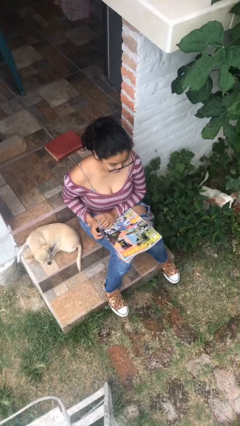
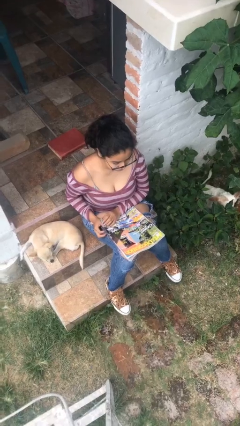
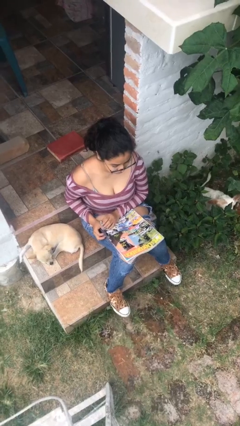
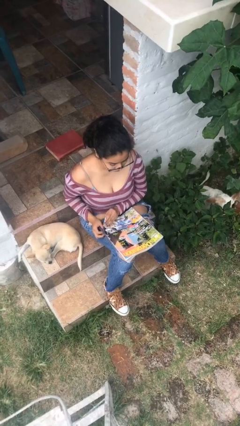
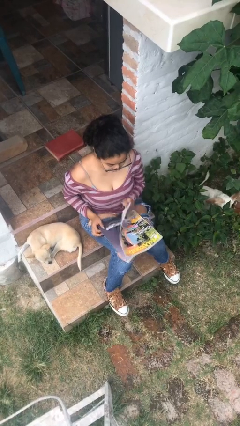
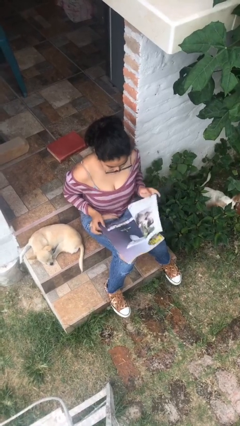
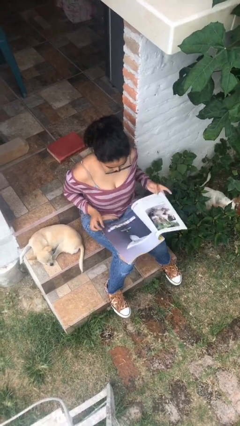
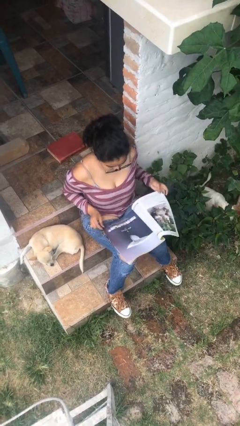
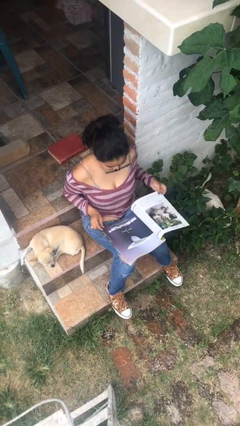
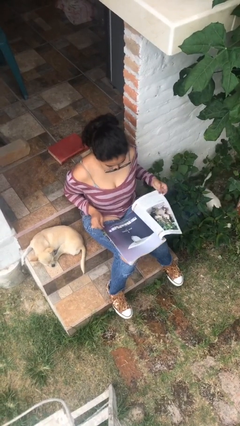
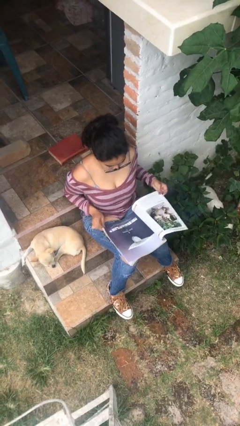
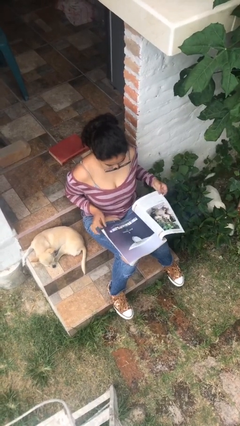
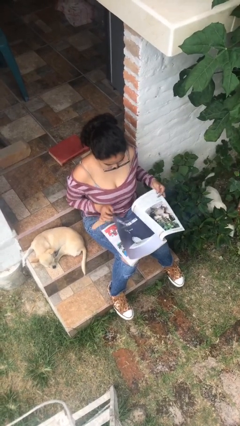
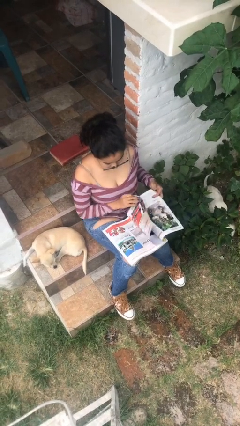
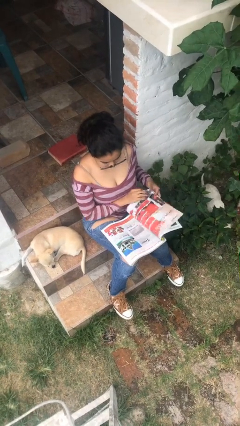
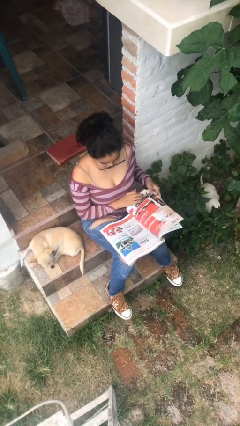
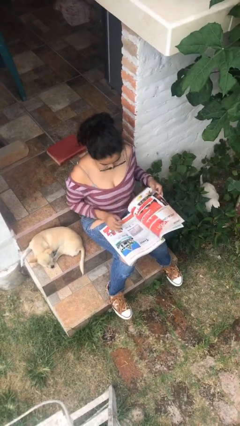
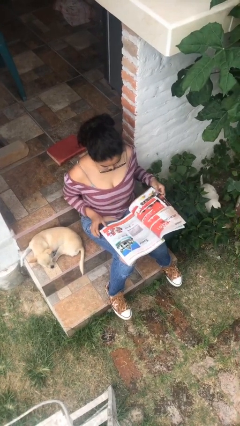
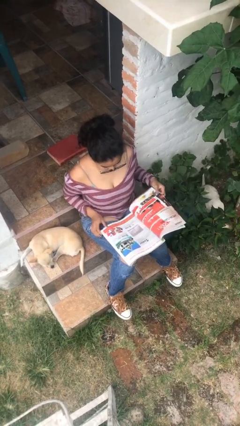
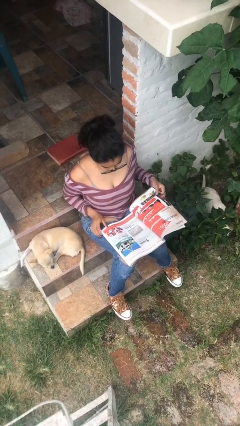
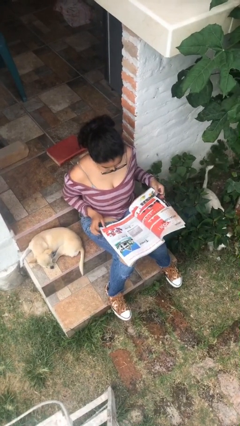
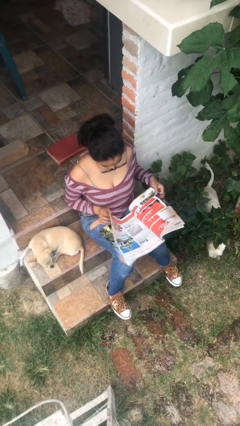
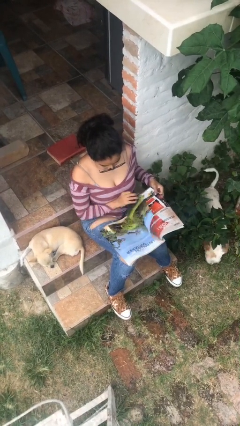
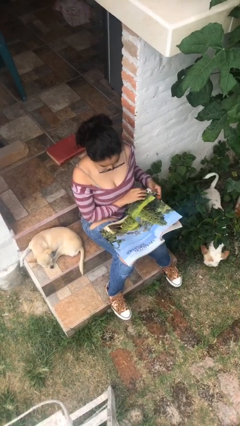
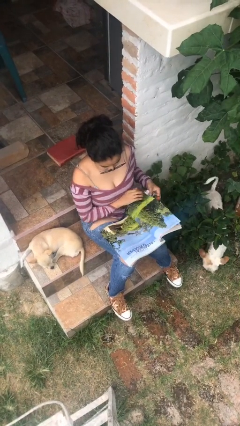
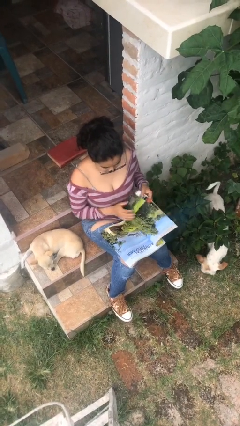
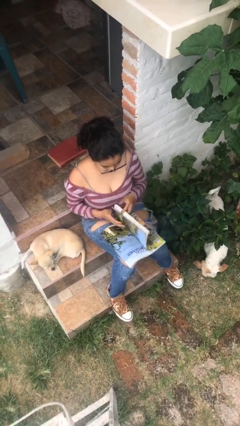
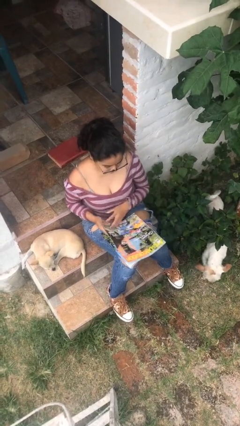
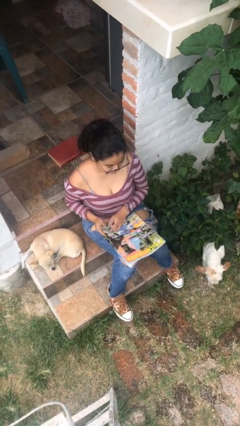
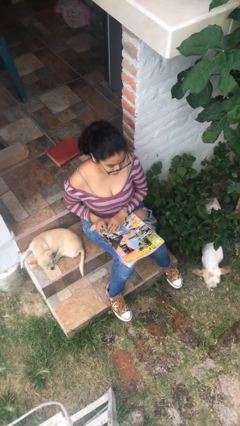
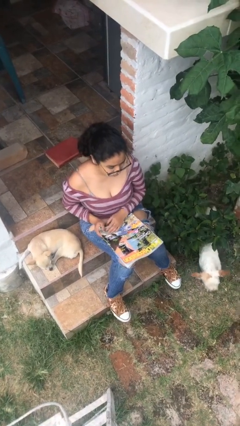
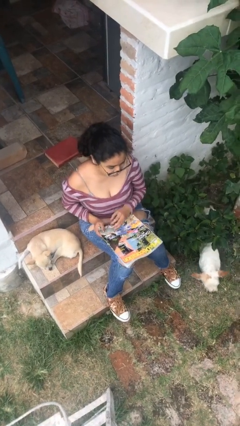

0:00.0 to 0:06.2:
person reads magazine

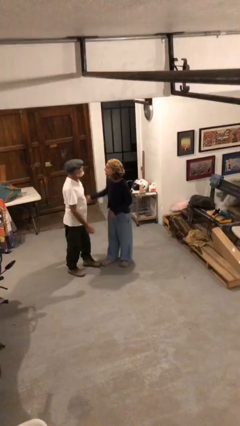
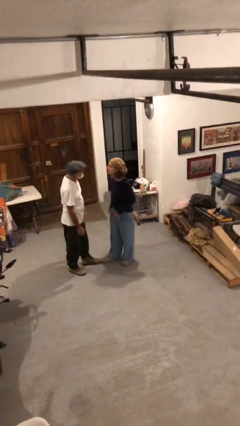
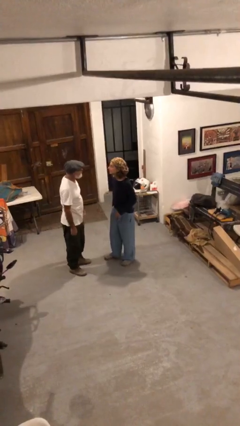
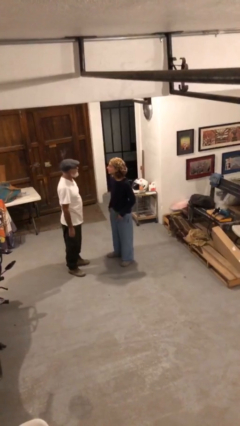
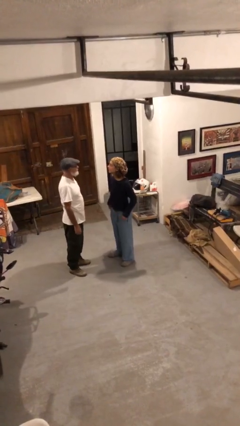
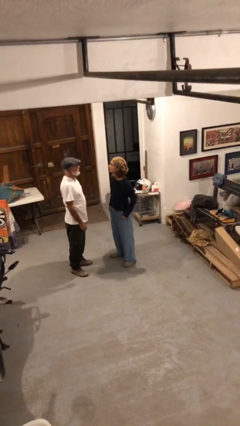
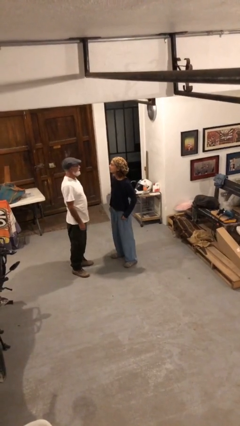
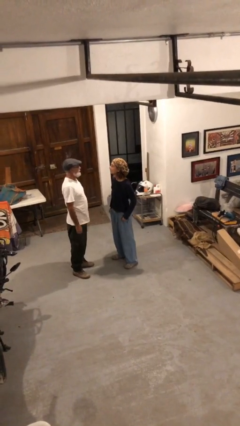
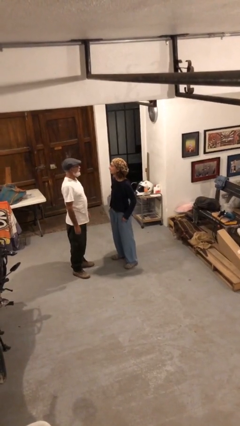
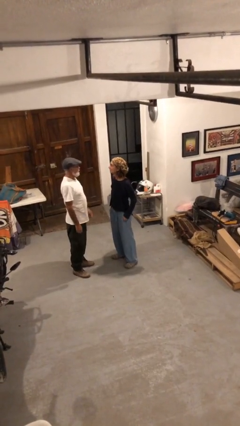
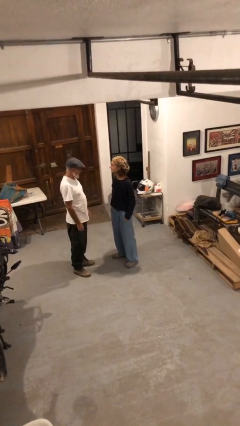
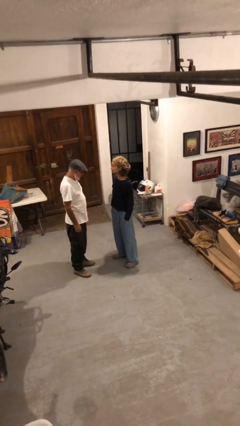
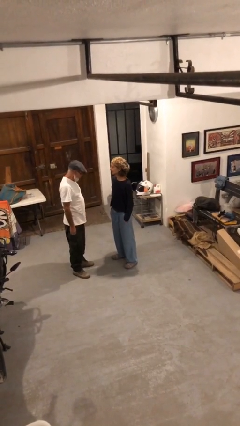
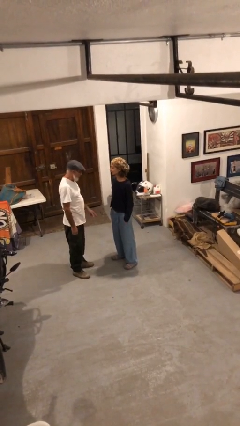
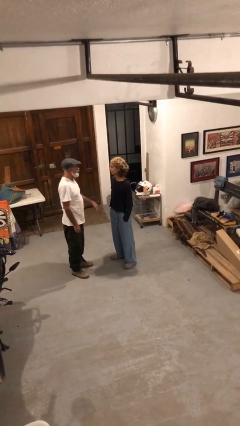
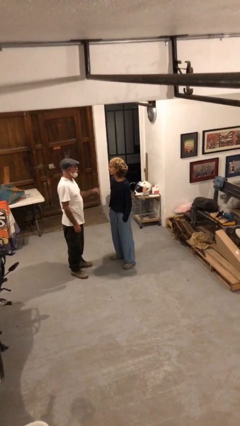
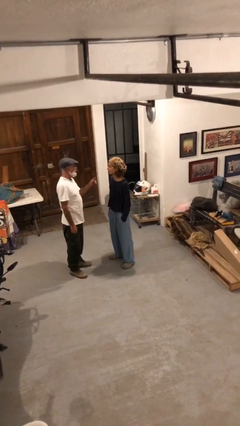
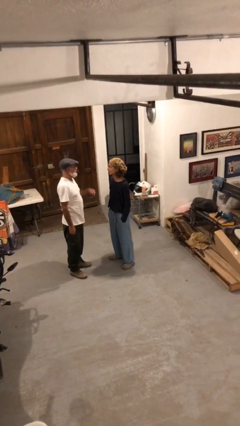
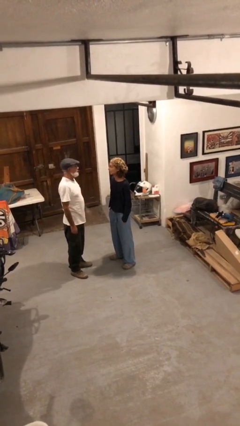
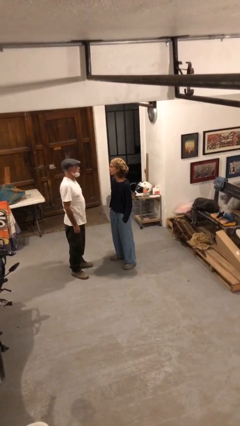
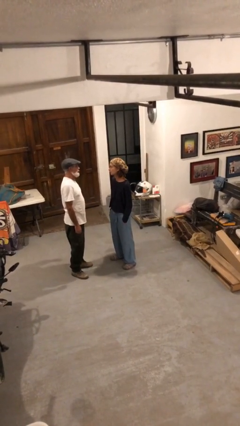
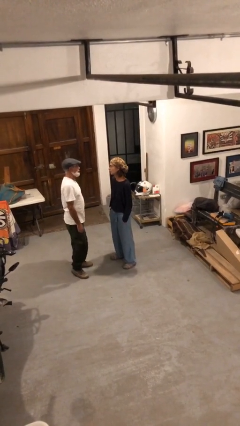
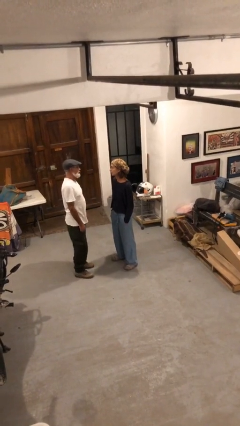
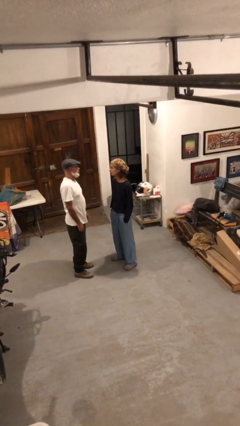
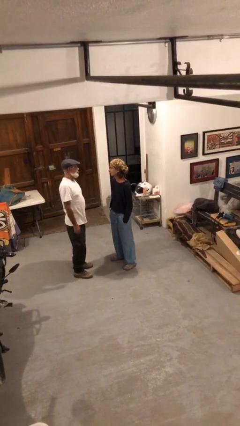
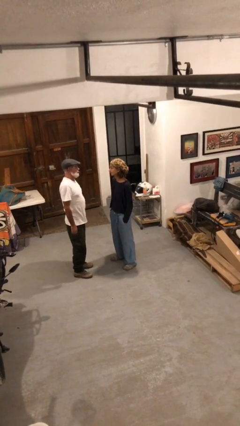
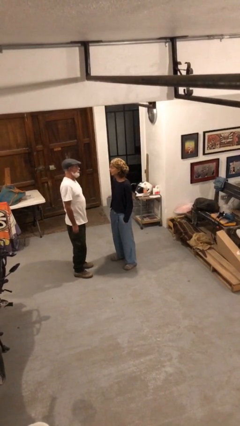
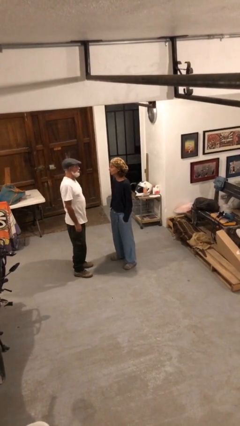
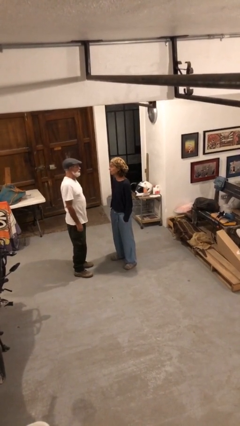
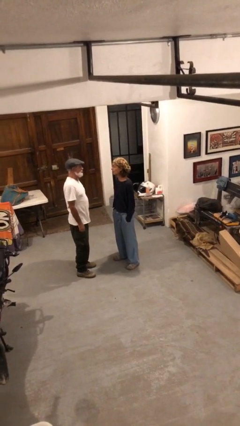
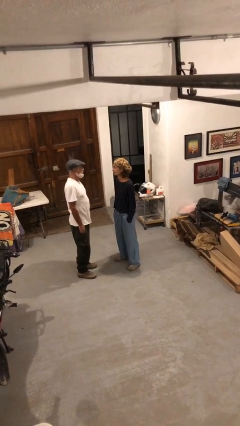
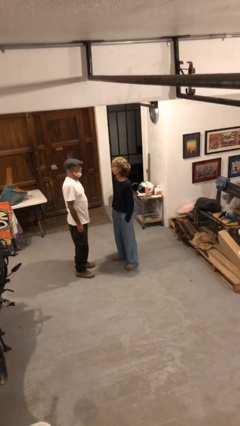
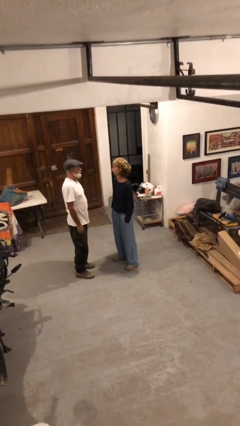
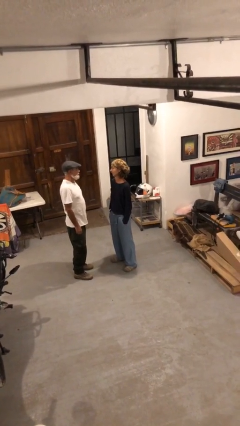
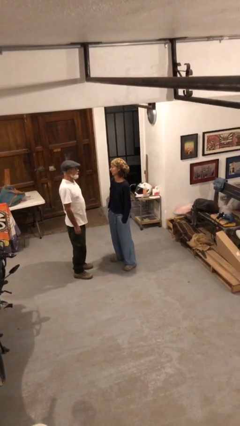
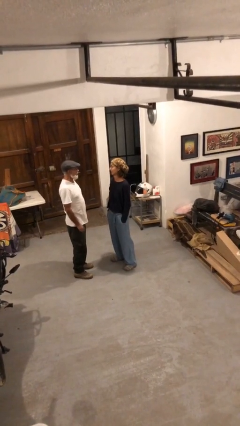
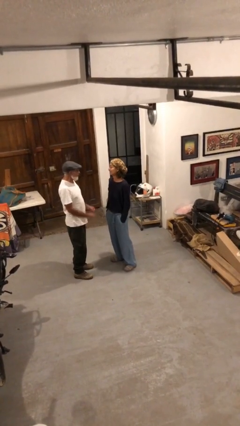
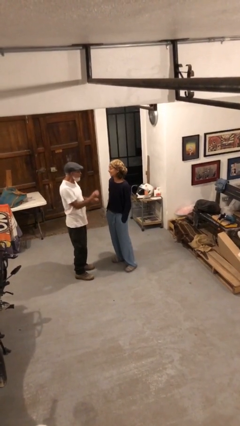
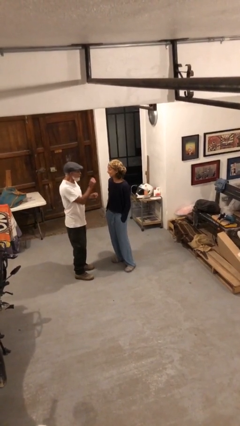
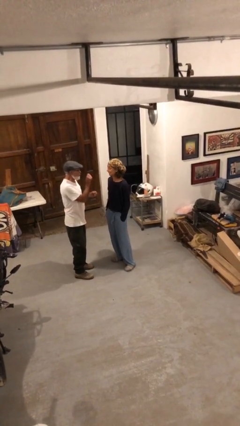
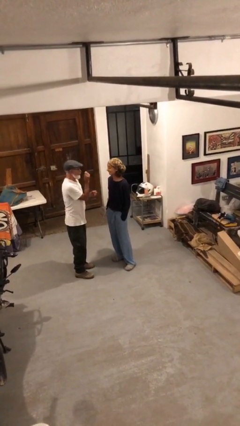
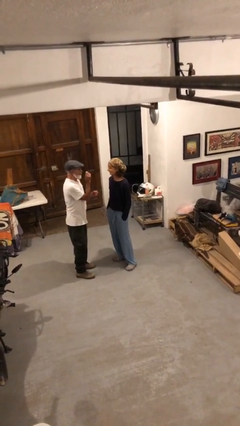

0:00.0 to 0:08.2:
person talks to person

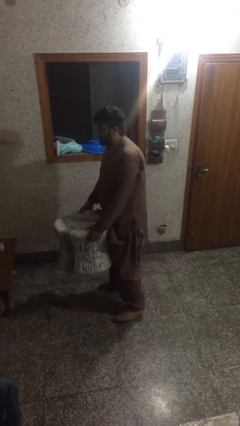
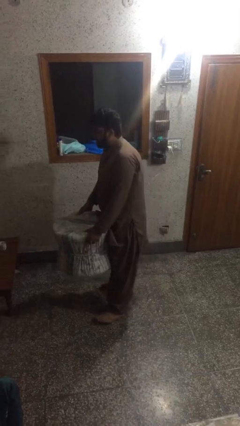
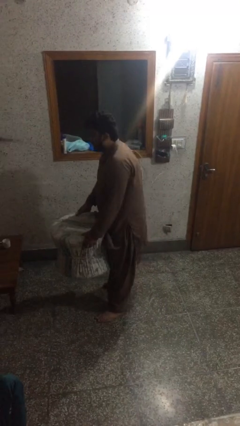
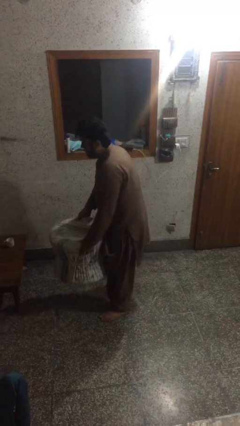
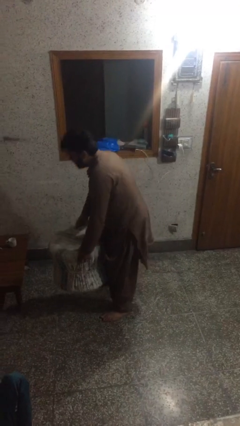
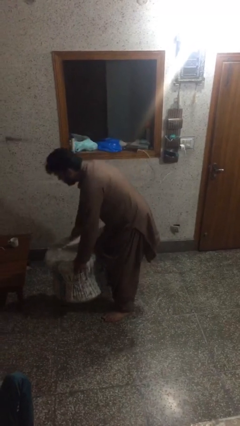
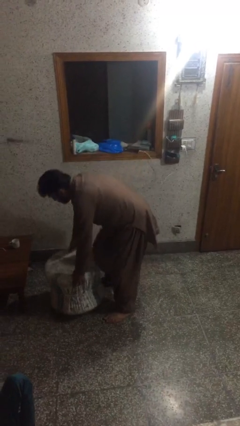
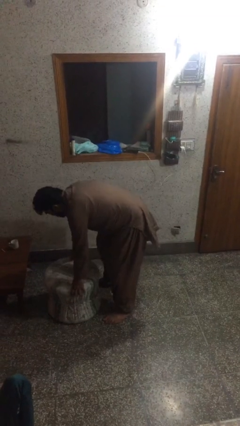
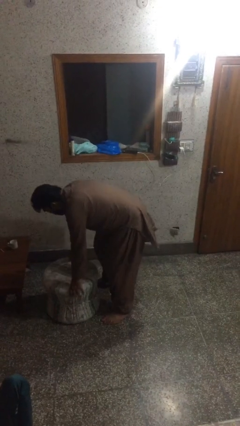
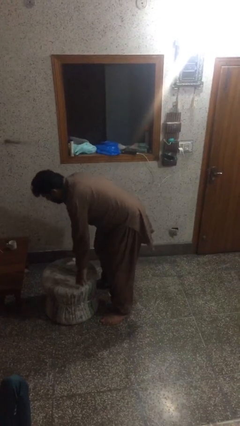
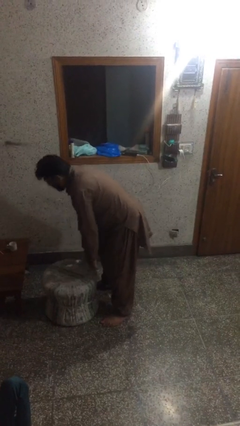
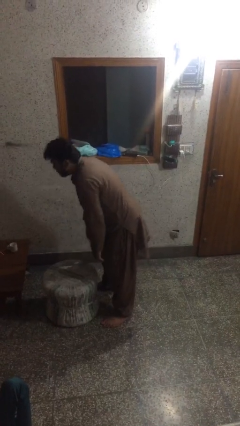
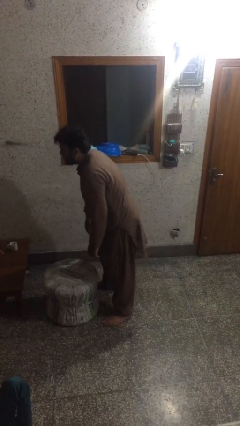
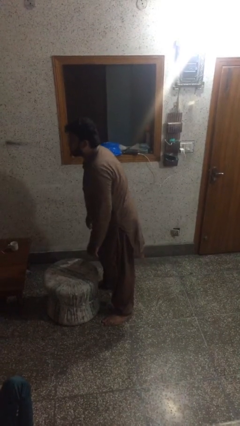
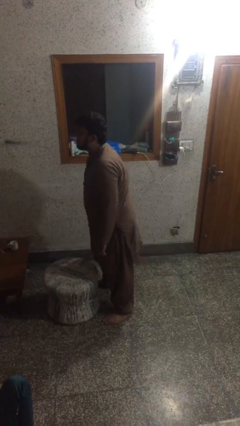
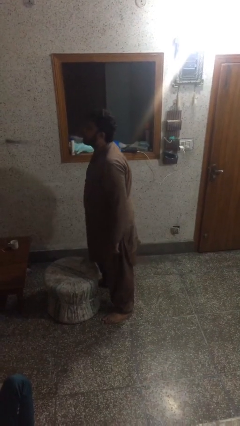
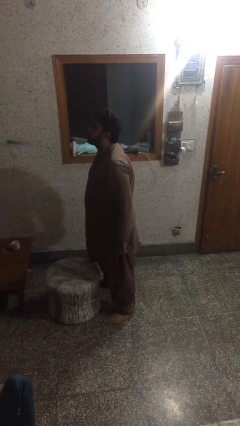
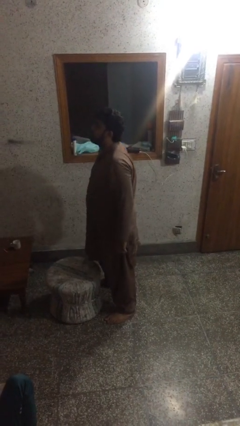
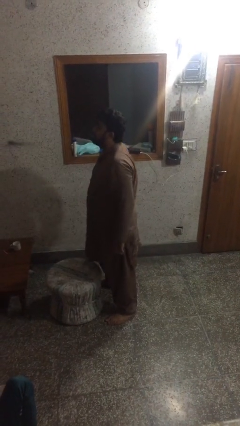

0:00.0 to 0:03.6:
person puts down object on floor
